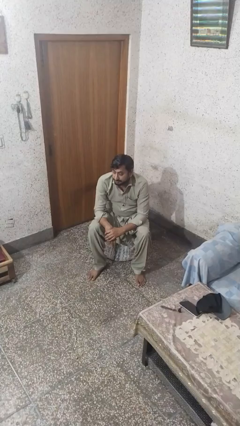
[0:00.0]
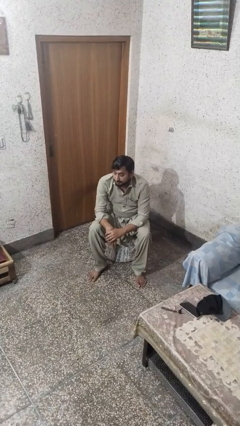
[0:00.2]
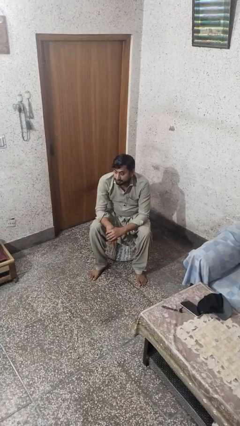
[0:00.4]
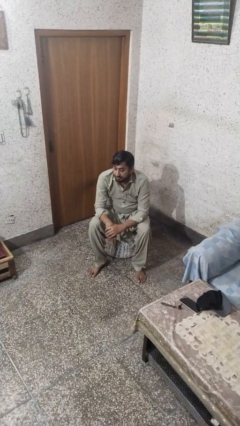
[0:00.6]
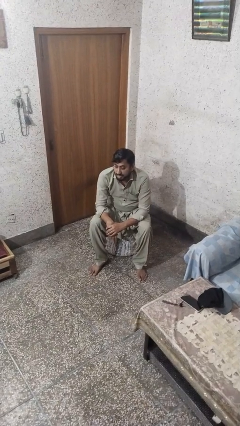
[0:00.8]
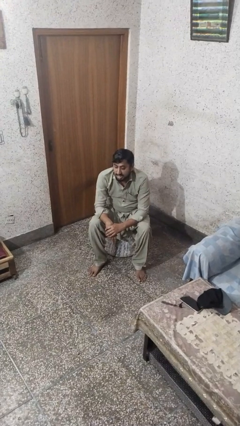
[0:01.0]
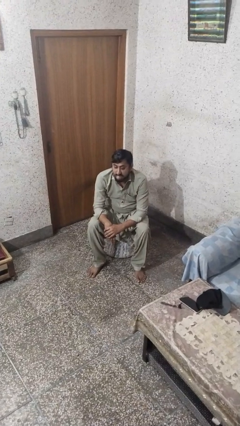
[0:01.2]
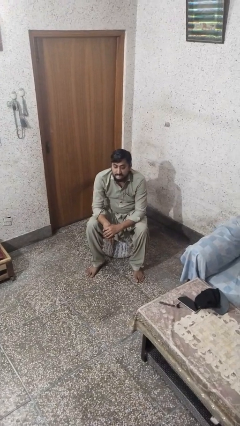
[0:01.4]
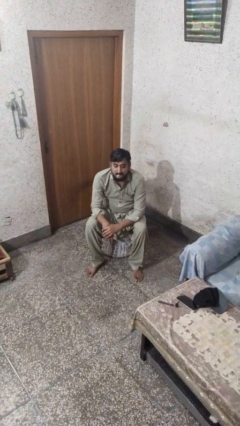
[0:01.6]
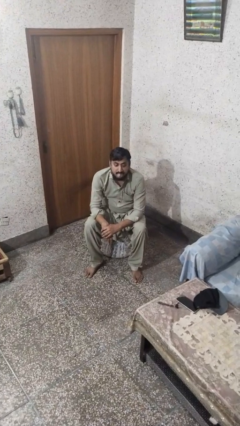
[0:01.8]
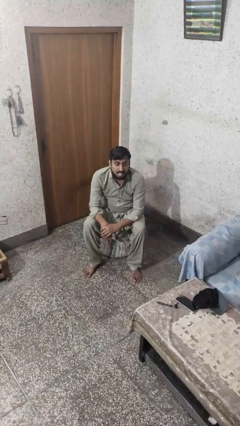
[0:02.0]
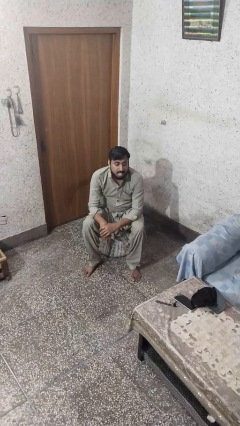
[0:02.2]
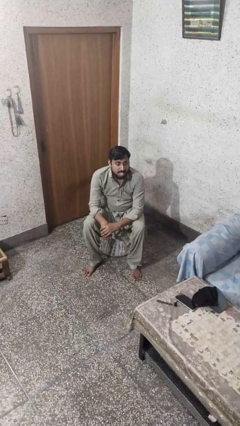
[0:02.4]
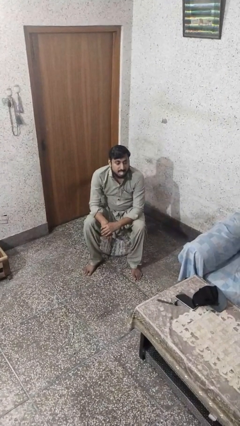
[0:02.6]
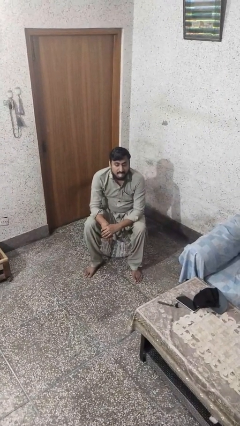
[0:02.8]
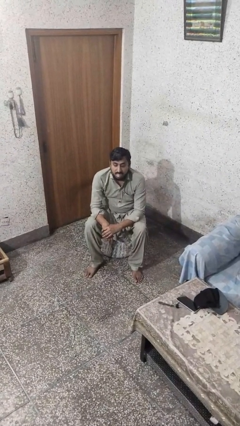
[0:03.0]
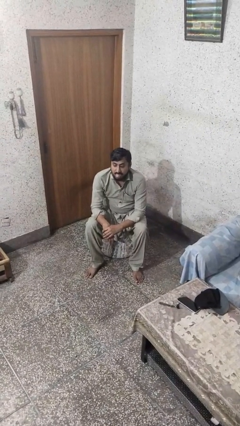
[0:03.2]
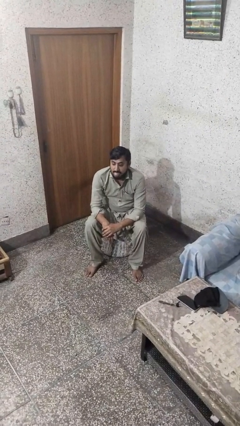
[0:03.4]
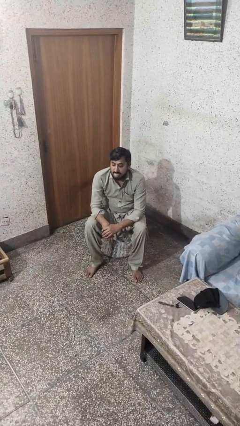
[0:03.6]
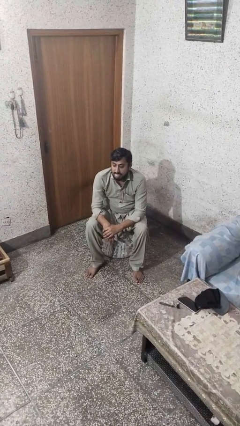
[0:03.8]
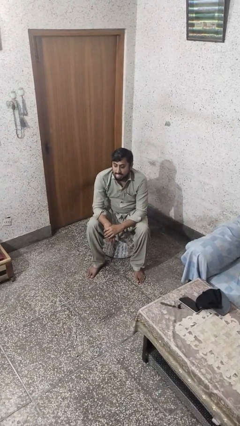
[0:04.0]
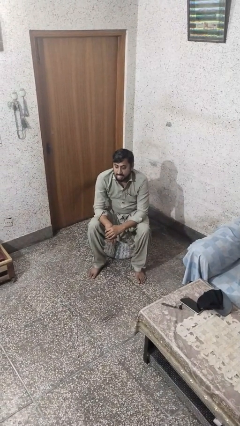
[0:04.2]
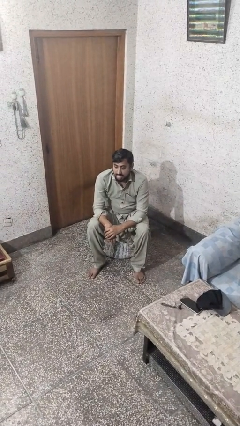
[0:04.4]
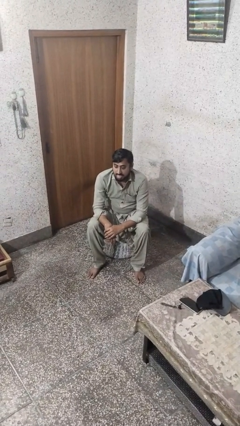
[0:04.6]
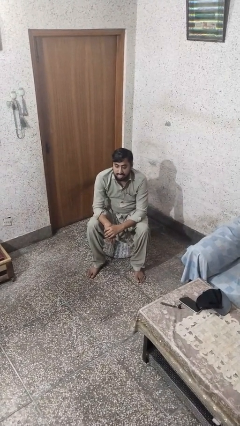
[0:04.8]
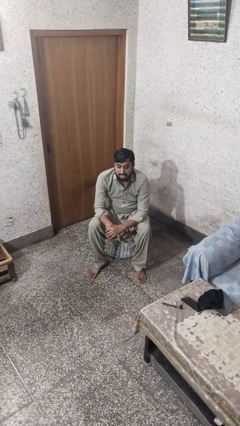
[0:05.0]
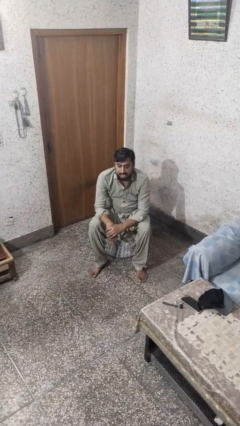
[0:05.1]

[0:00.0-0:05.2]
person sticks out tongue

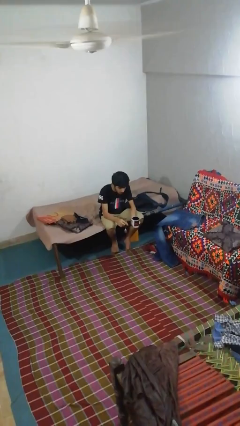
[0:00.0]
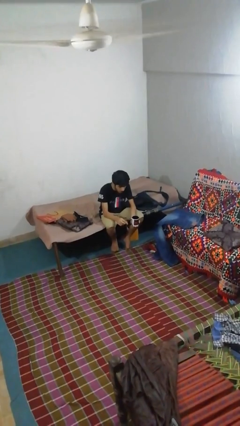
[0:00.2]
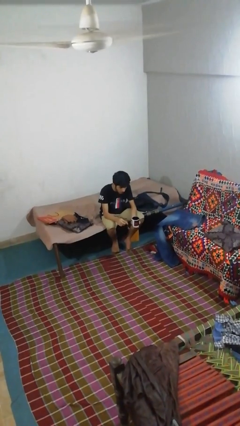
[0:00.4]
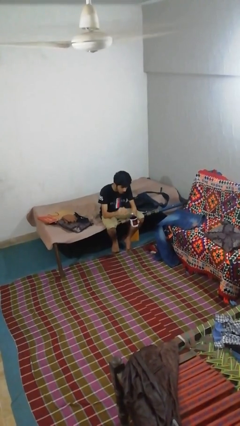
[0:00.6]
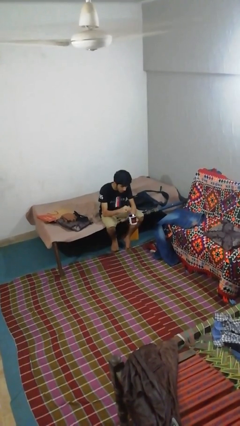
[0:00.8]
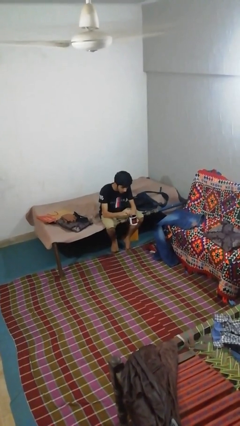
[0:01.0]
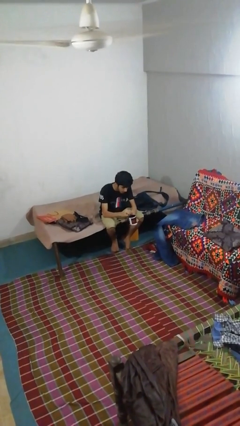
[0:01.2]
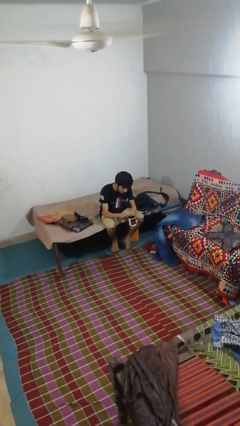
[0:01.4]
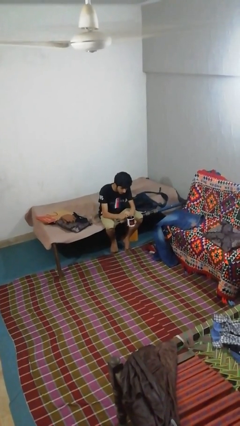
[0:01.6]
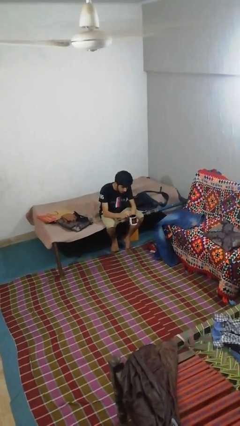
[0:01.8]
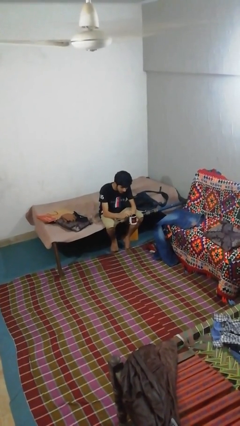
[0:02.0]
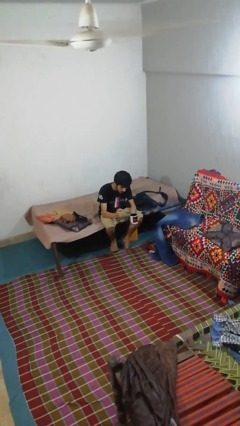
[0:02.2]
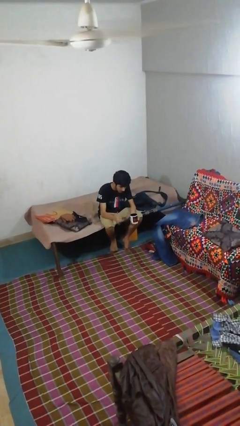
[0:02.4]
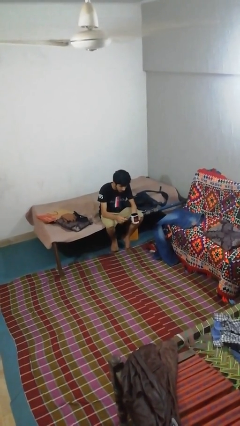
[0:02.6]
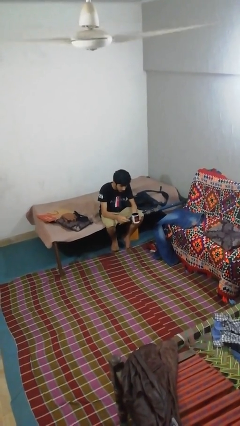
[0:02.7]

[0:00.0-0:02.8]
person stirs mug

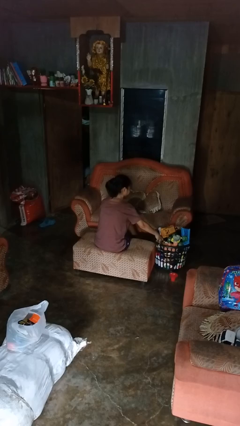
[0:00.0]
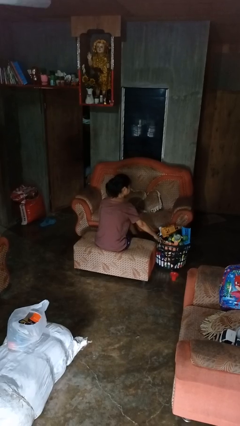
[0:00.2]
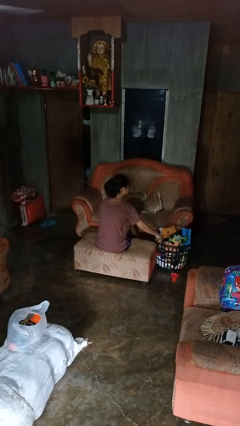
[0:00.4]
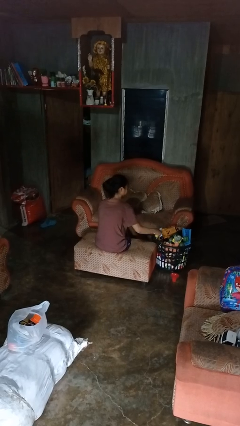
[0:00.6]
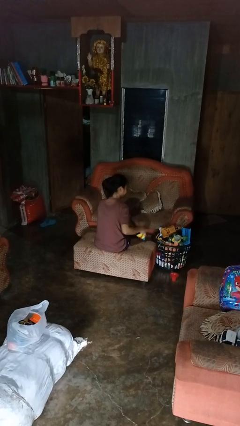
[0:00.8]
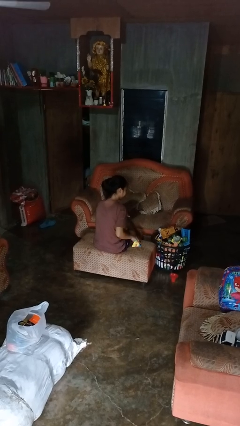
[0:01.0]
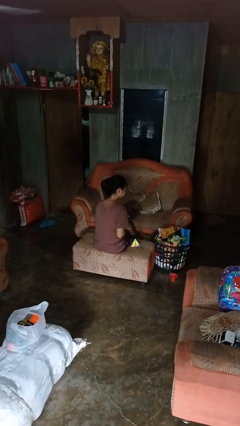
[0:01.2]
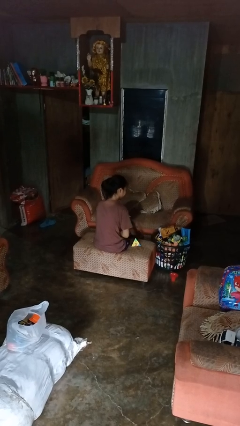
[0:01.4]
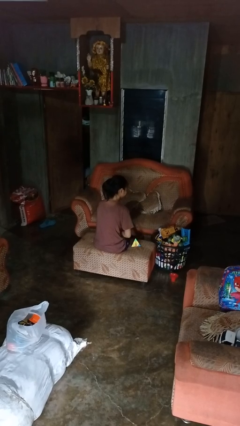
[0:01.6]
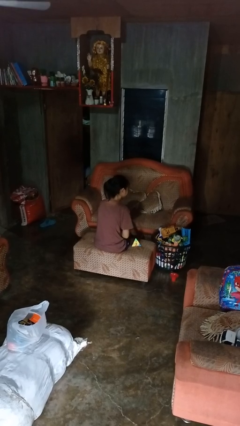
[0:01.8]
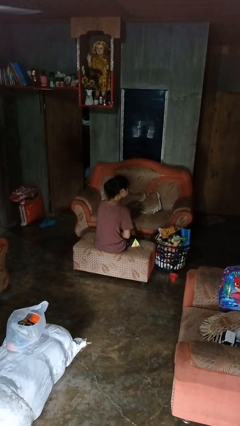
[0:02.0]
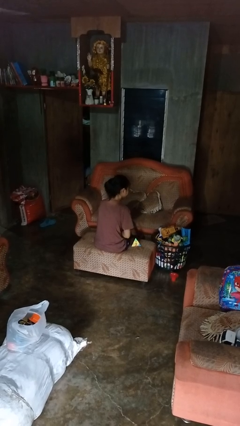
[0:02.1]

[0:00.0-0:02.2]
person takes object from basket

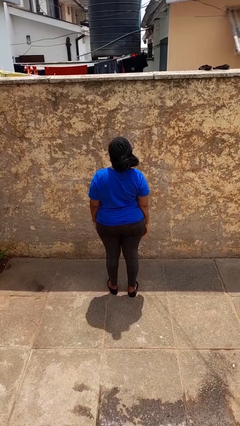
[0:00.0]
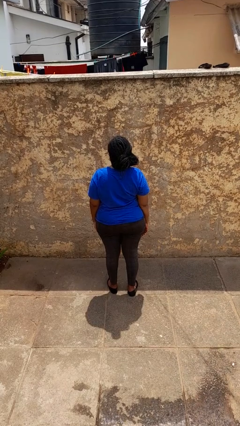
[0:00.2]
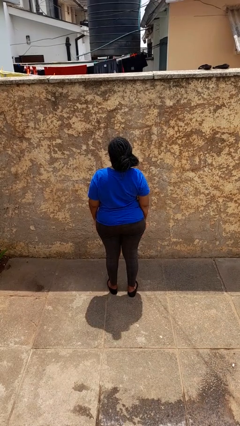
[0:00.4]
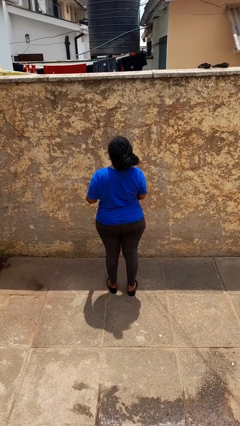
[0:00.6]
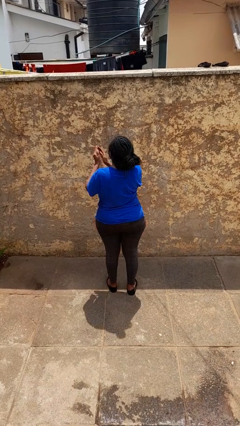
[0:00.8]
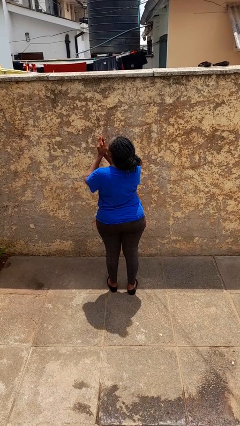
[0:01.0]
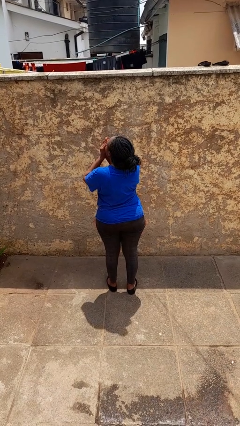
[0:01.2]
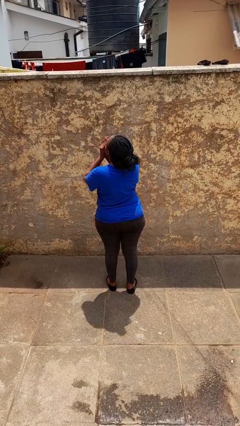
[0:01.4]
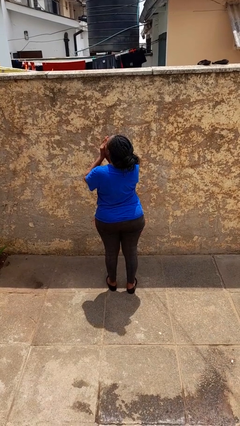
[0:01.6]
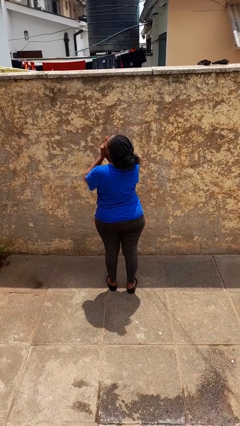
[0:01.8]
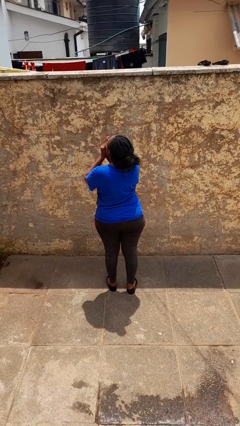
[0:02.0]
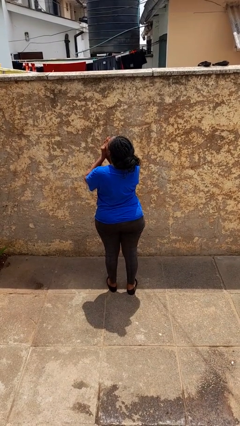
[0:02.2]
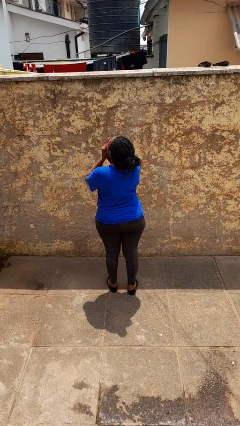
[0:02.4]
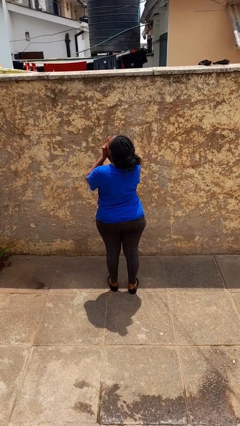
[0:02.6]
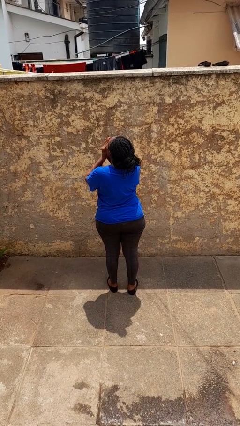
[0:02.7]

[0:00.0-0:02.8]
person blows into hands

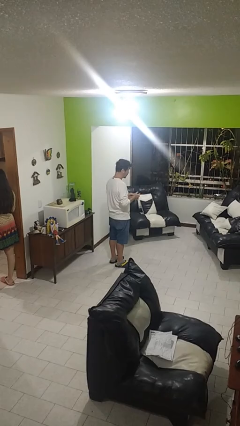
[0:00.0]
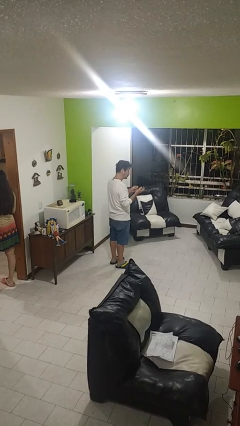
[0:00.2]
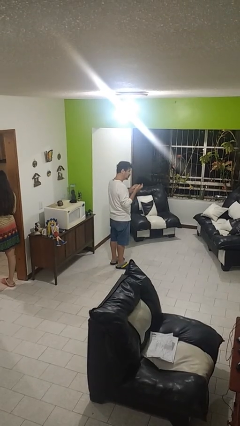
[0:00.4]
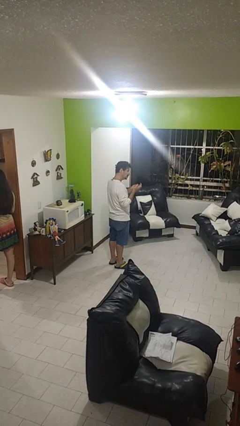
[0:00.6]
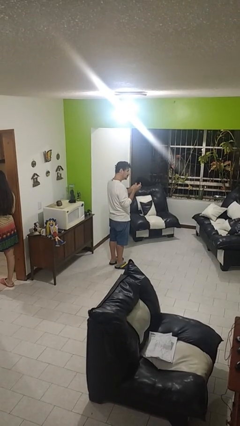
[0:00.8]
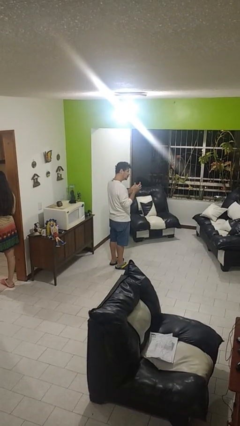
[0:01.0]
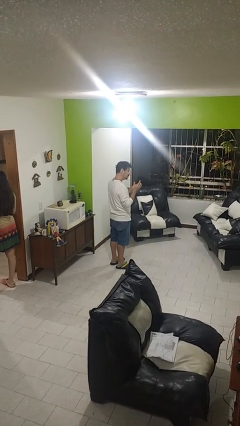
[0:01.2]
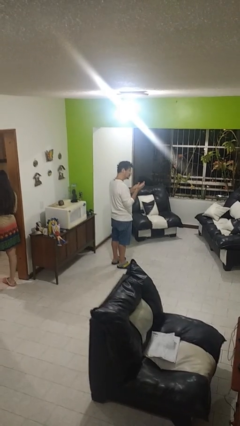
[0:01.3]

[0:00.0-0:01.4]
person files fingernails

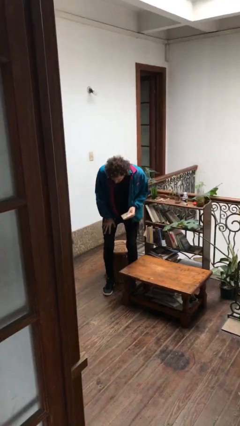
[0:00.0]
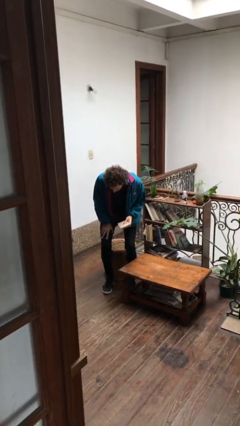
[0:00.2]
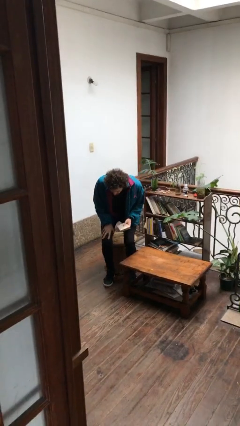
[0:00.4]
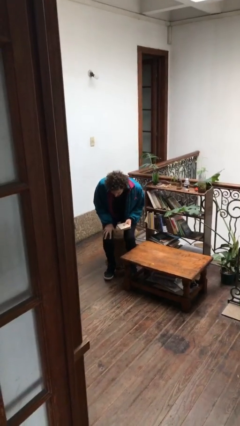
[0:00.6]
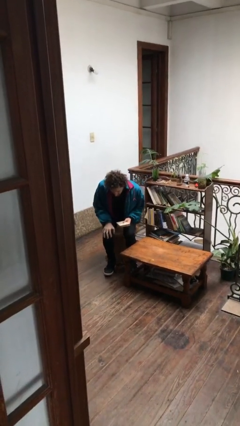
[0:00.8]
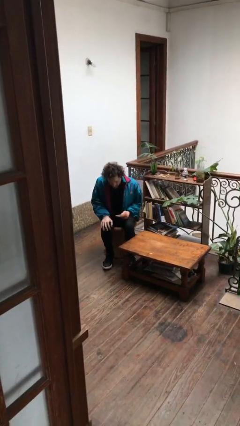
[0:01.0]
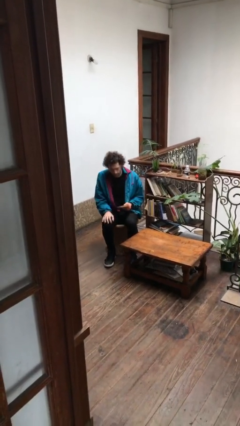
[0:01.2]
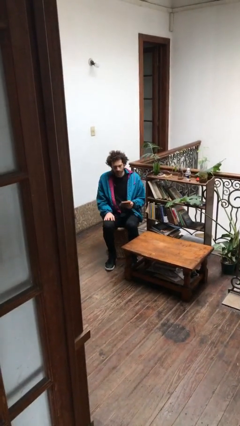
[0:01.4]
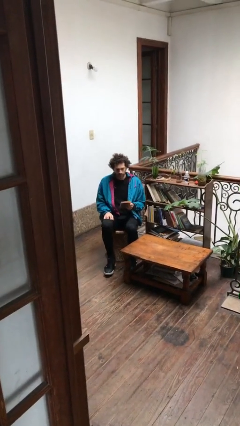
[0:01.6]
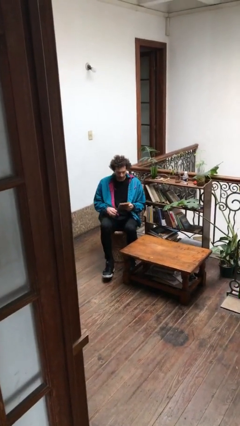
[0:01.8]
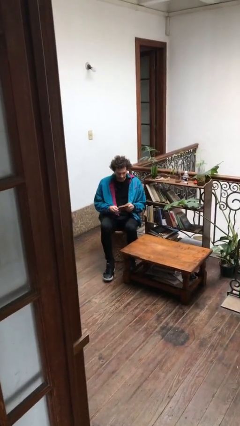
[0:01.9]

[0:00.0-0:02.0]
person sits down

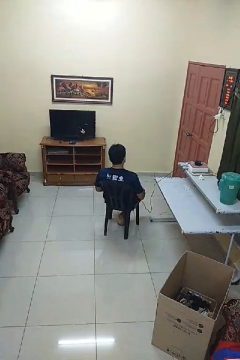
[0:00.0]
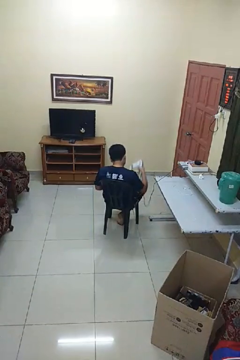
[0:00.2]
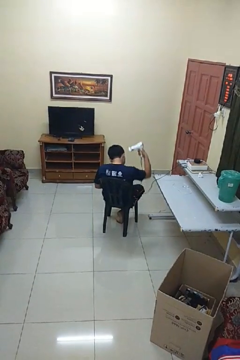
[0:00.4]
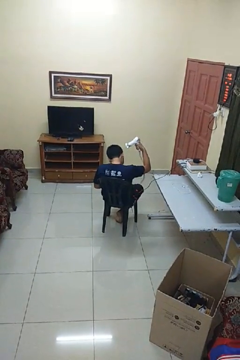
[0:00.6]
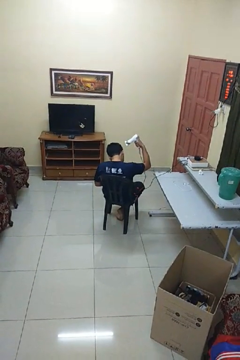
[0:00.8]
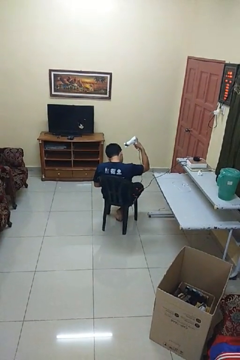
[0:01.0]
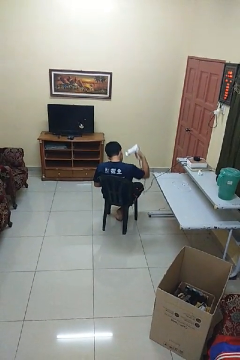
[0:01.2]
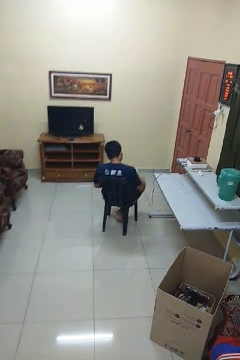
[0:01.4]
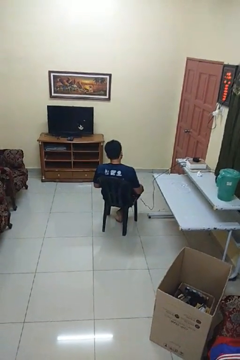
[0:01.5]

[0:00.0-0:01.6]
person dries hair with hairdryer
